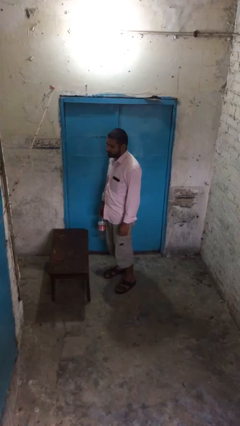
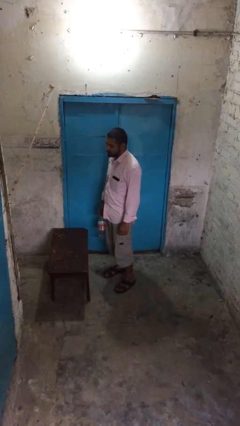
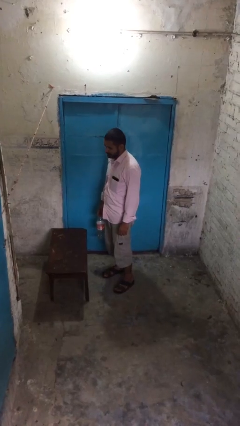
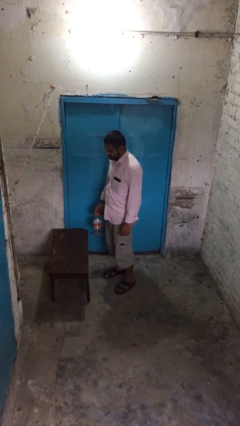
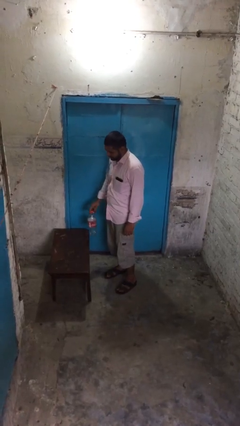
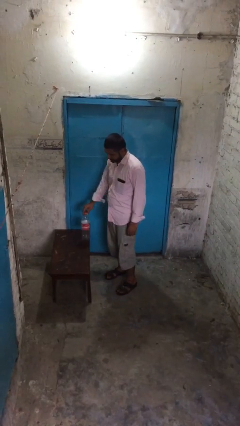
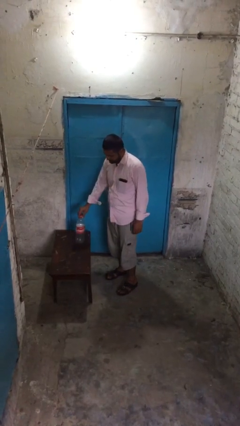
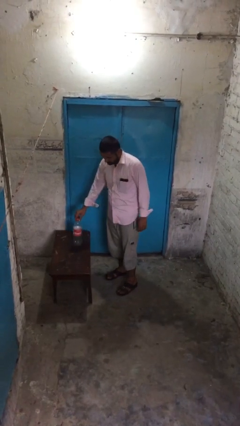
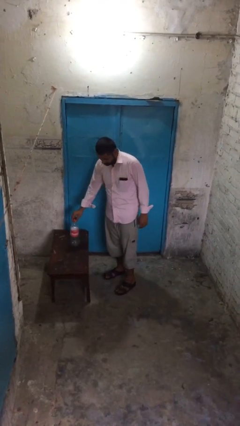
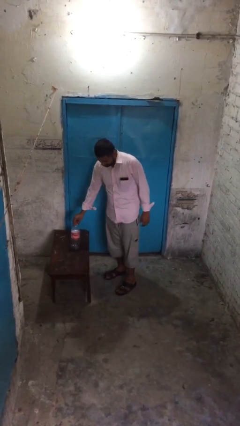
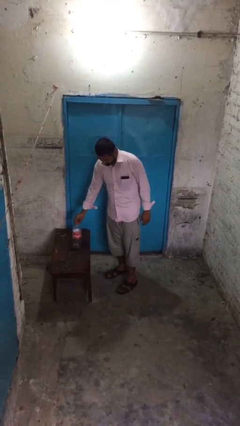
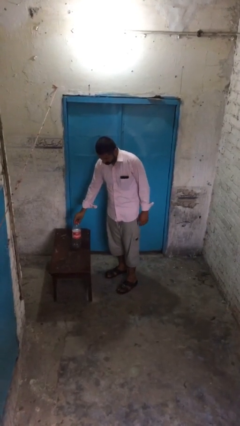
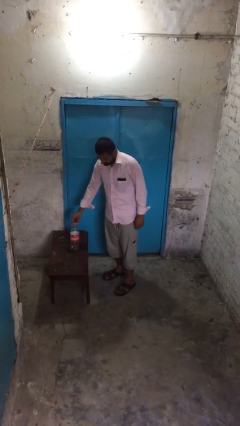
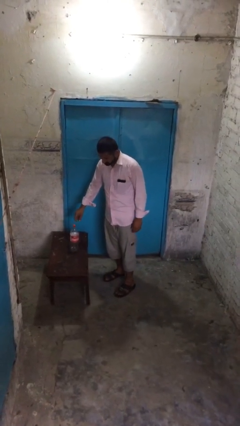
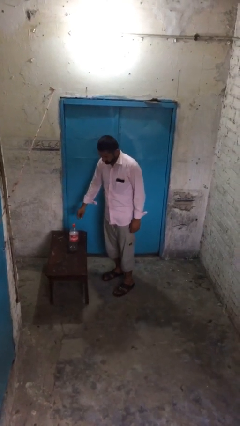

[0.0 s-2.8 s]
person puts down object on table

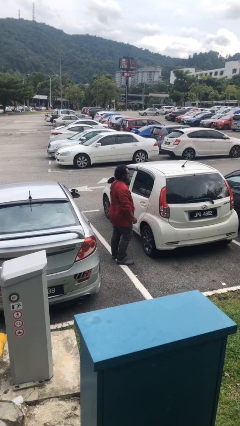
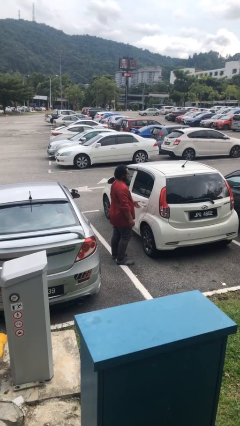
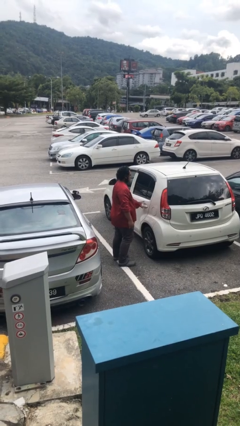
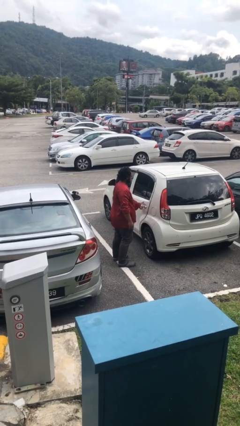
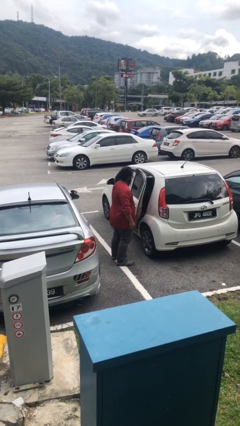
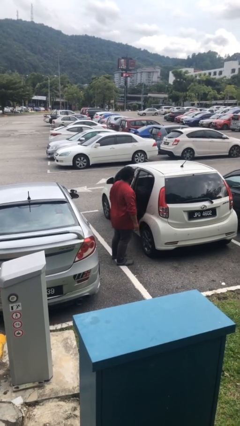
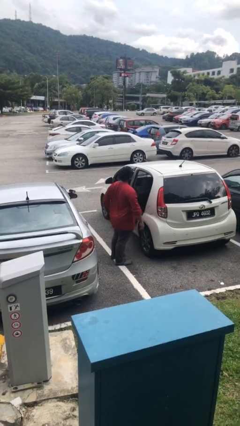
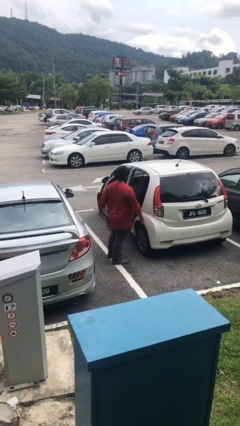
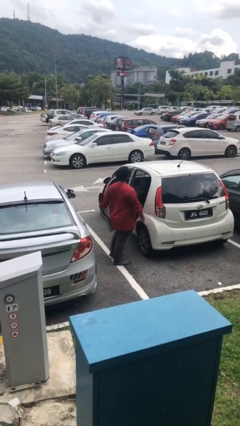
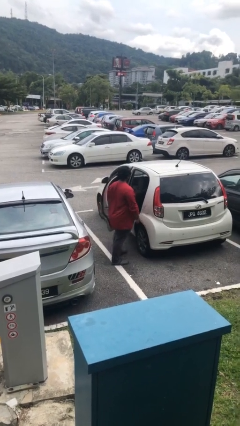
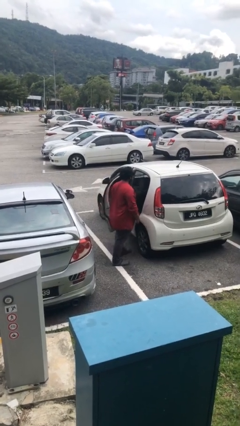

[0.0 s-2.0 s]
person opens car door

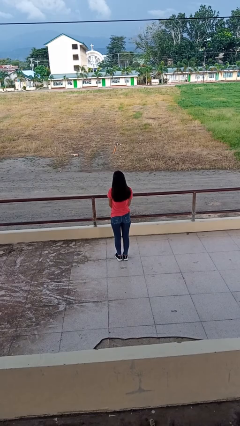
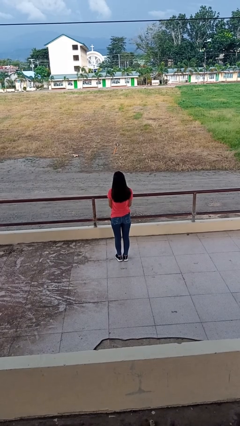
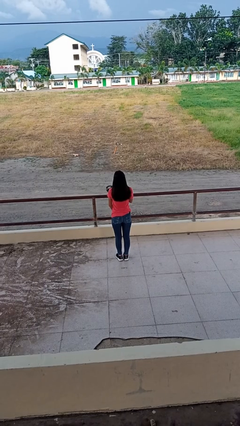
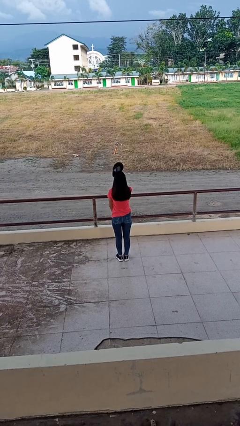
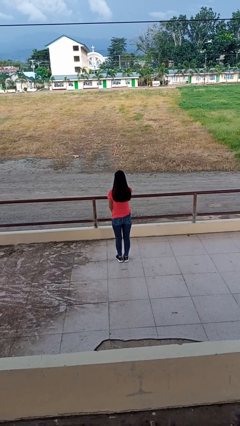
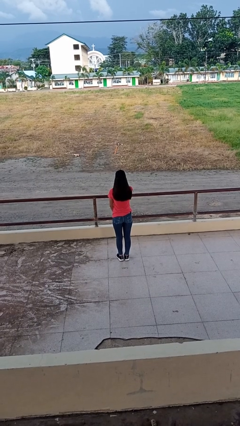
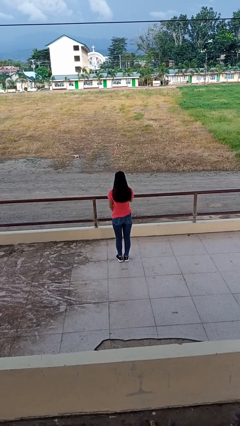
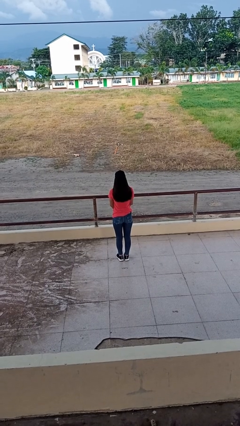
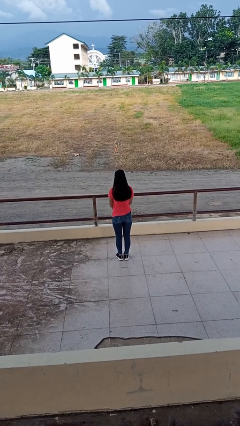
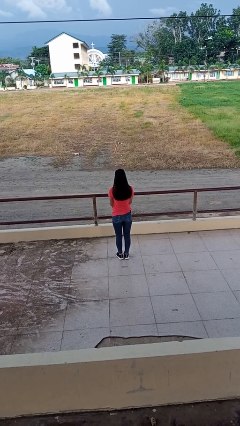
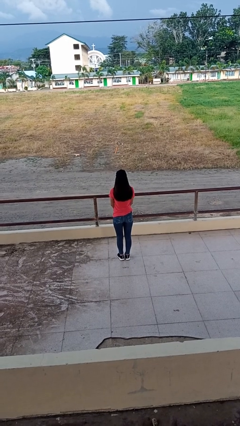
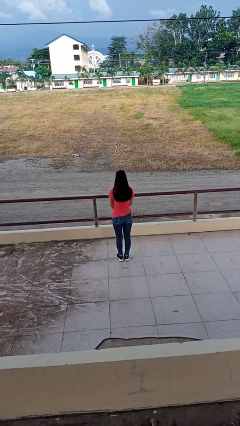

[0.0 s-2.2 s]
person puts on hat

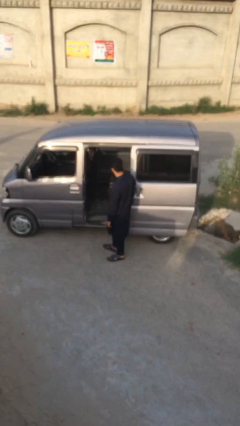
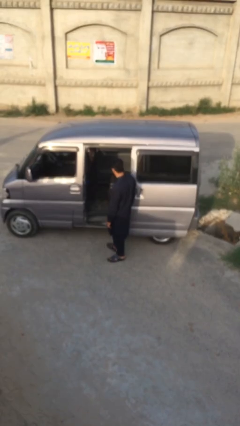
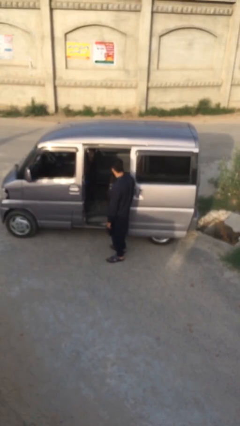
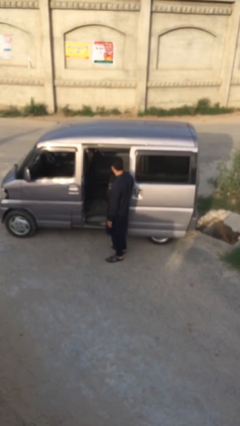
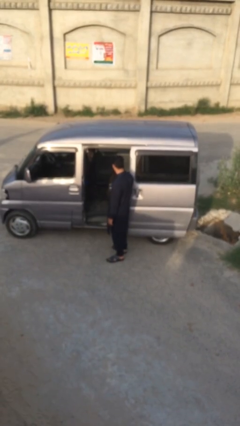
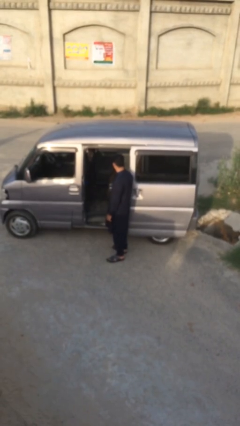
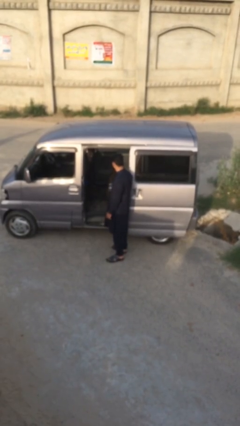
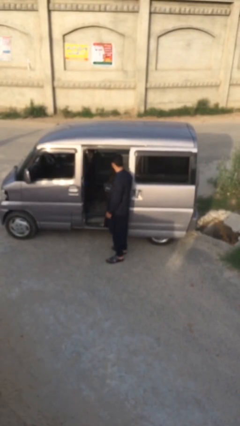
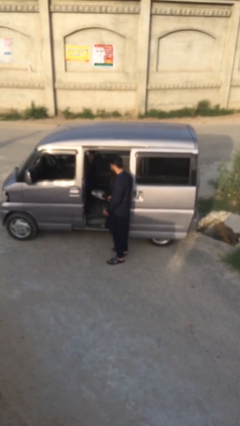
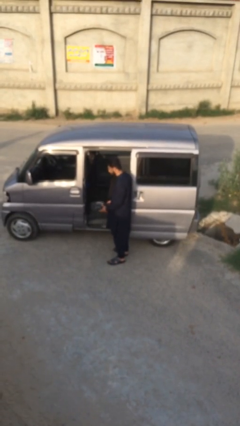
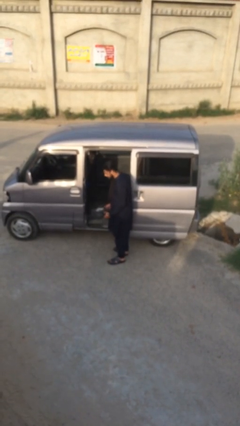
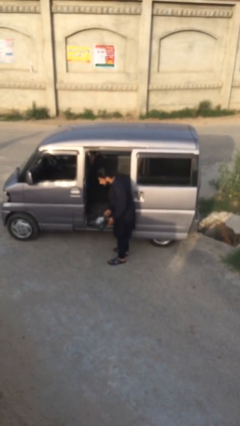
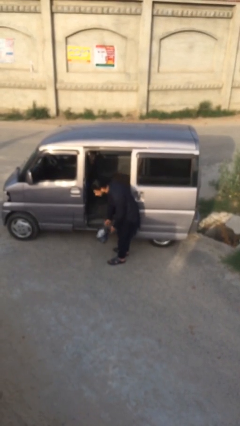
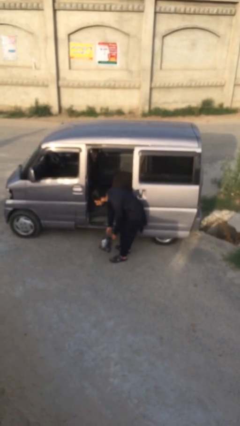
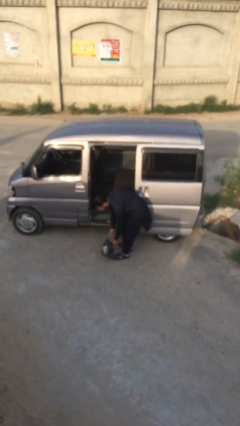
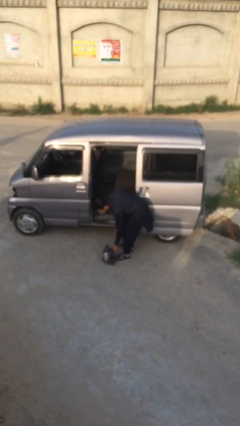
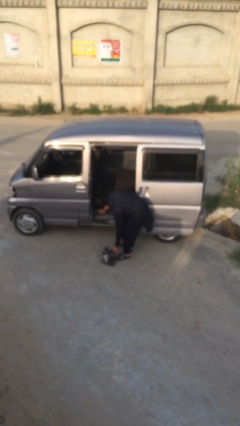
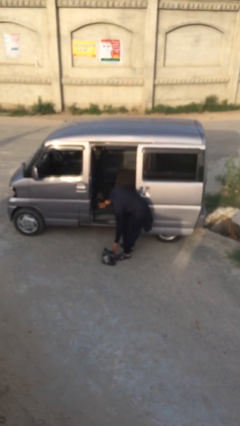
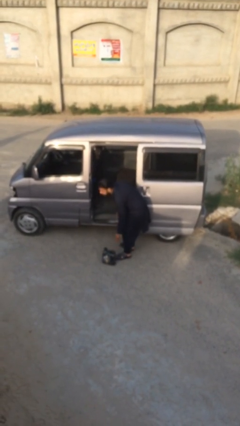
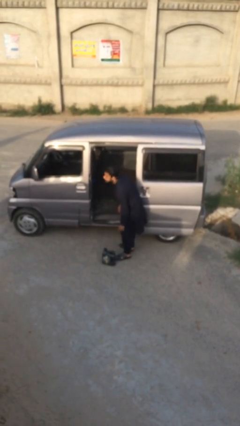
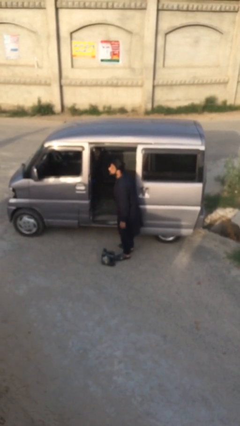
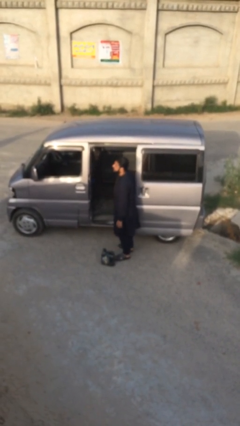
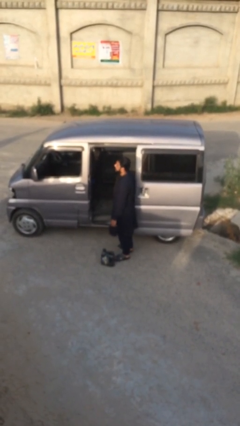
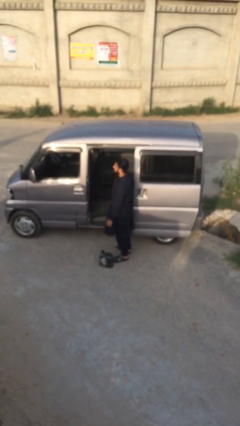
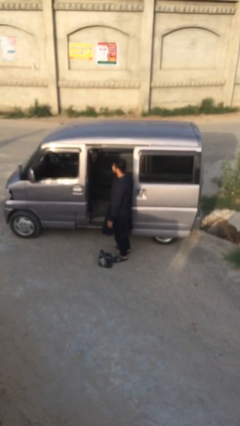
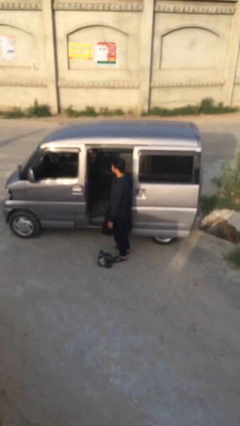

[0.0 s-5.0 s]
person unloads car

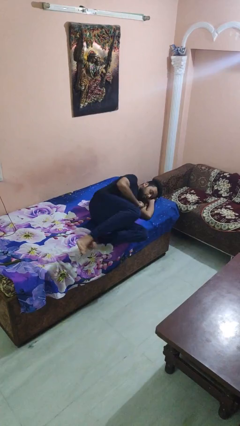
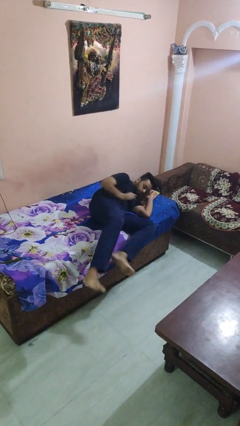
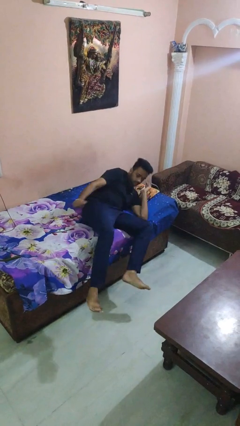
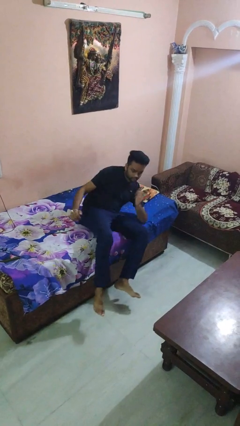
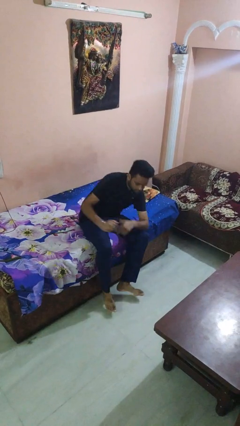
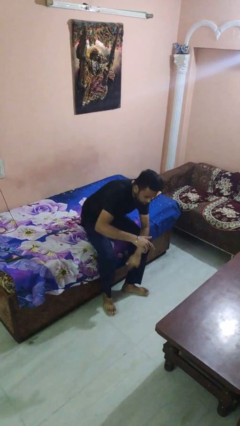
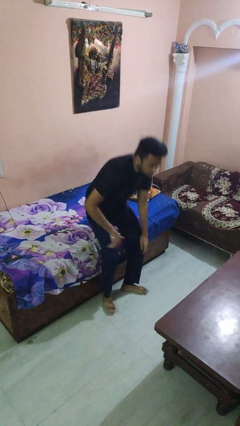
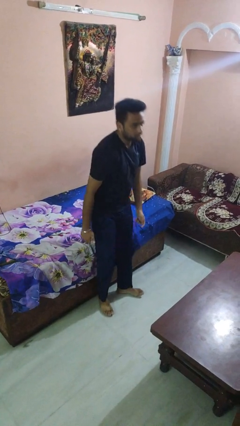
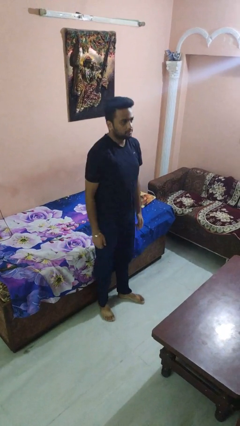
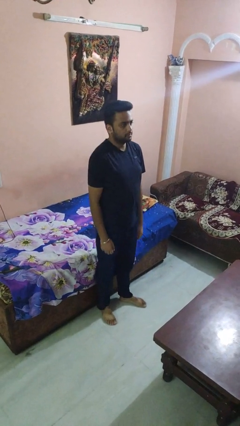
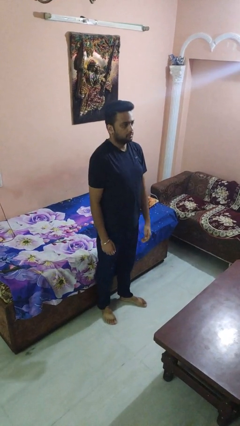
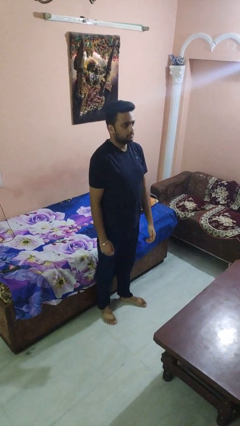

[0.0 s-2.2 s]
person stands up

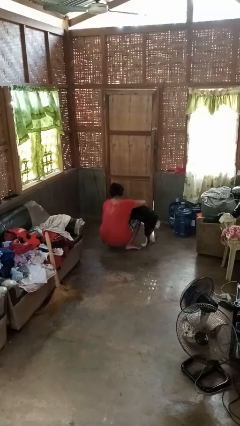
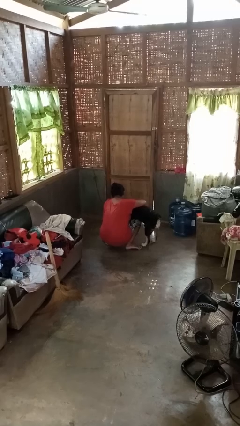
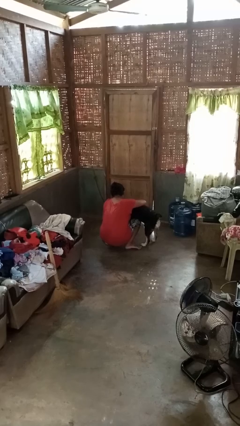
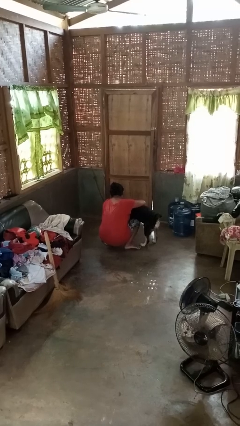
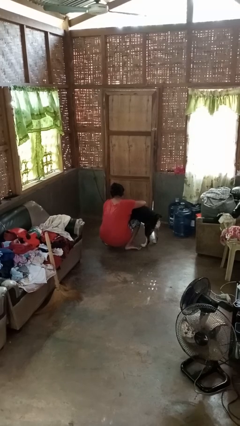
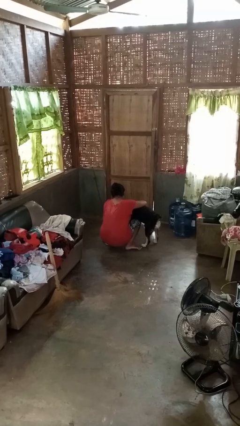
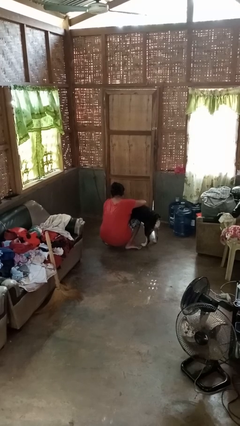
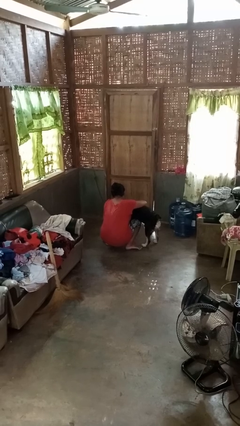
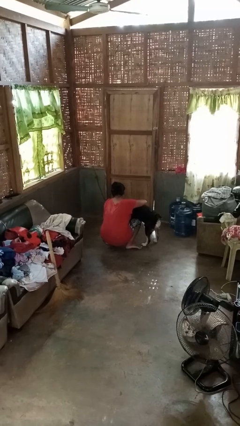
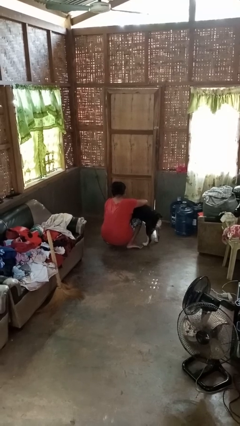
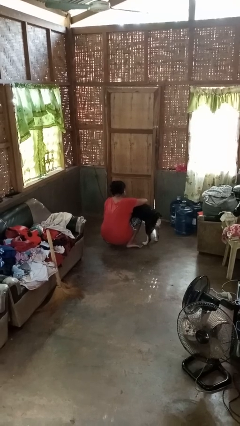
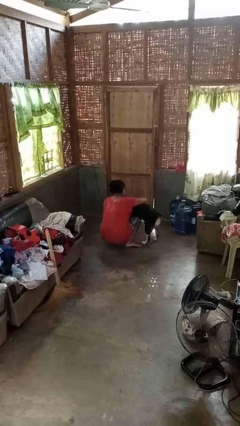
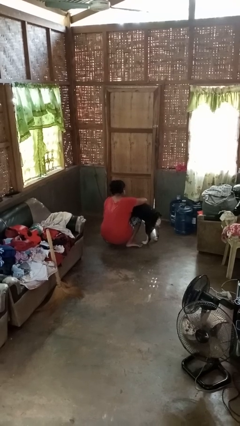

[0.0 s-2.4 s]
person hugs dog

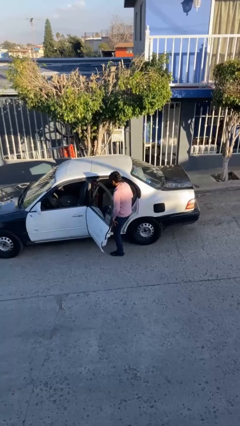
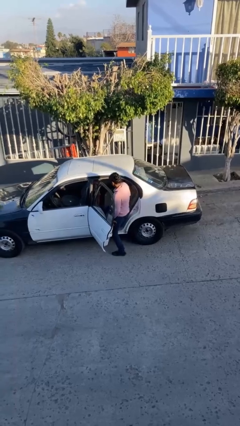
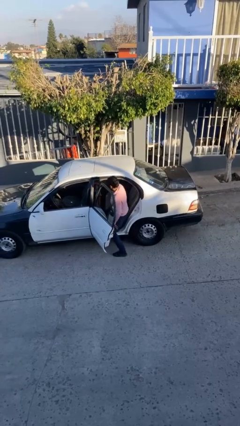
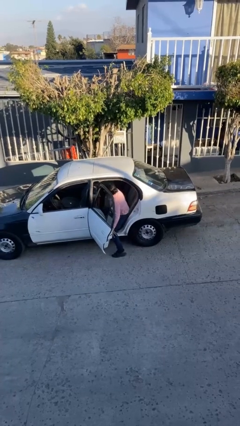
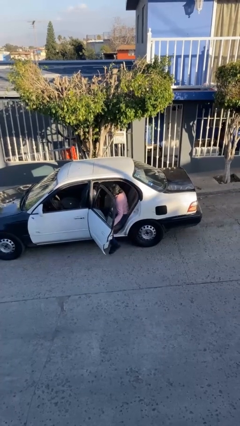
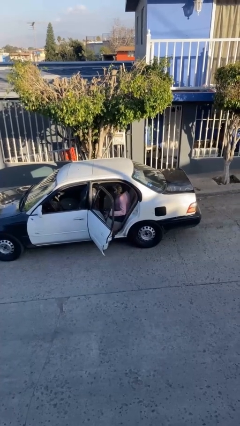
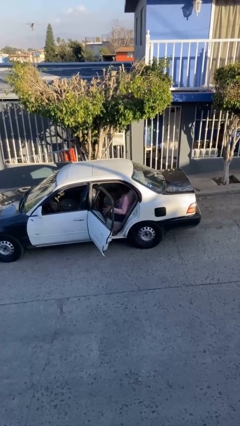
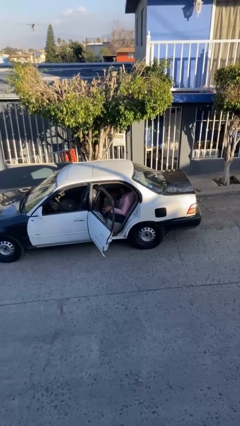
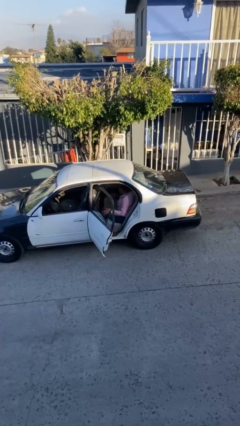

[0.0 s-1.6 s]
person enters car
